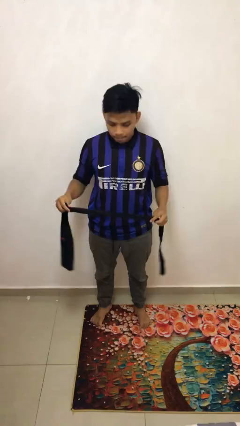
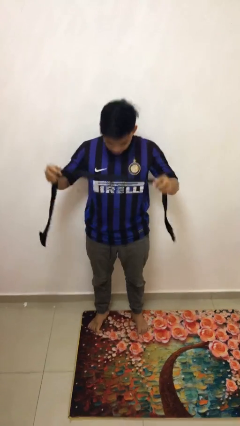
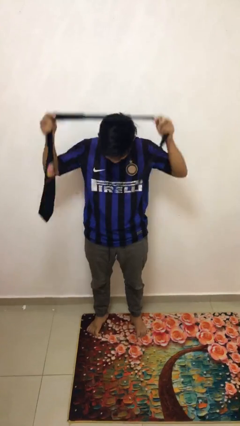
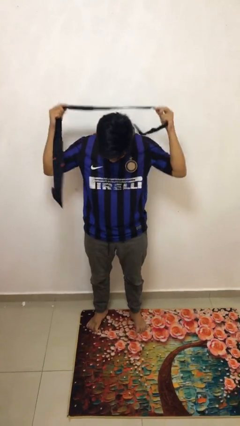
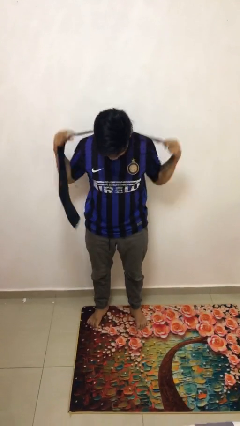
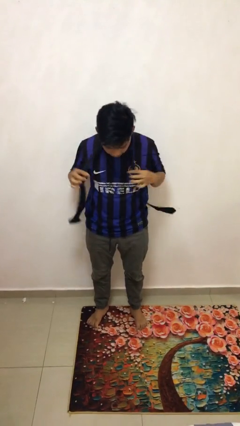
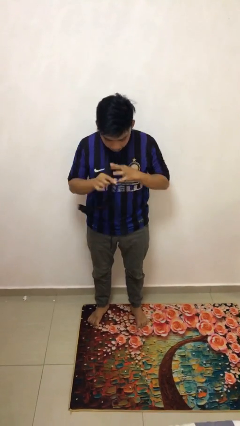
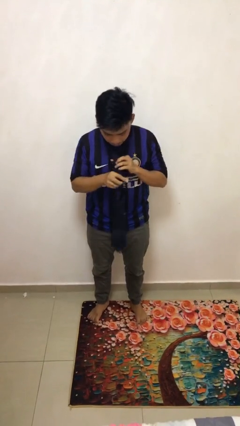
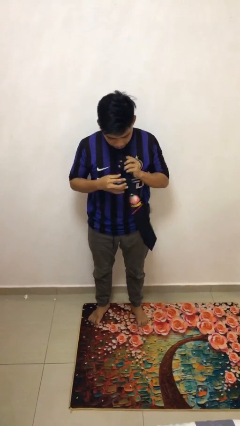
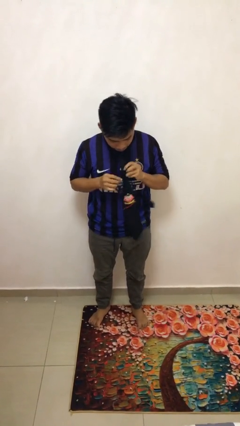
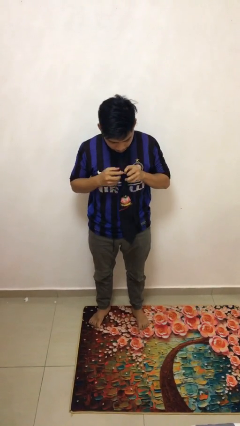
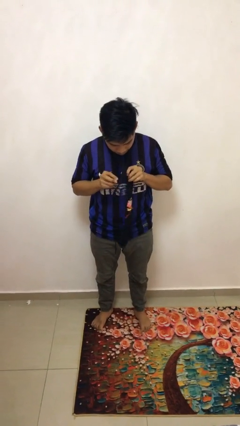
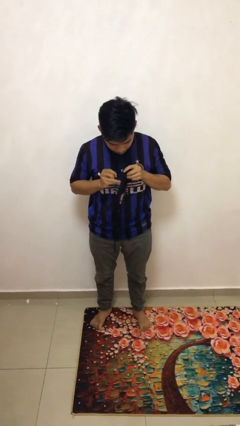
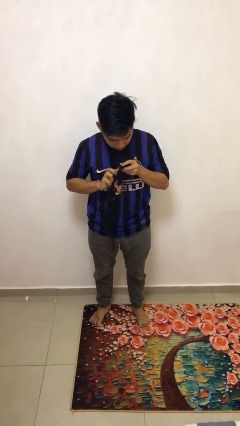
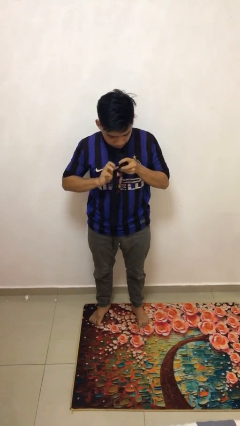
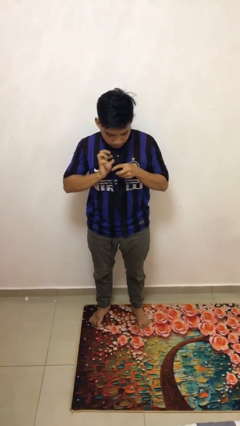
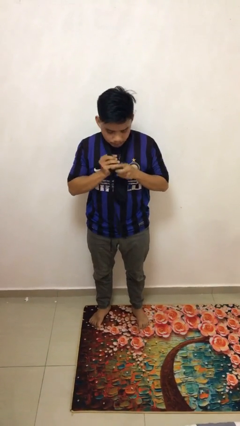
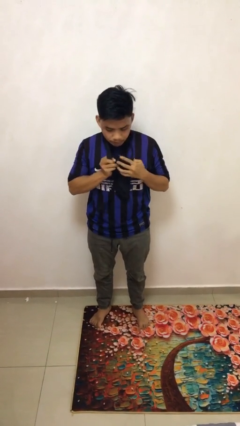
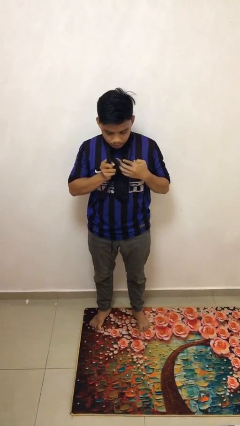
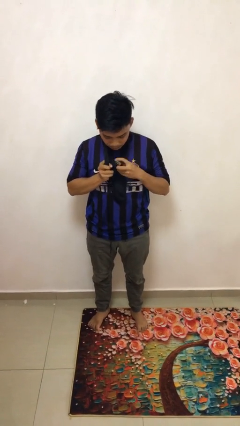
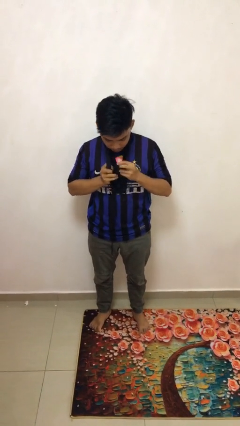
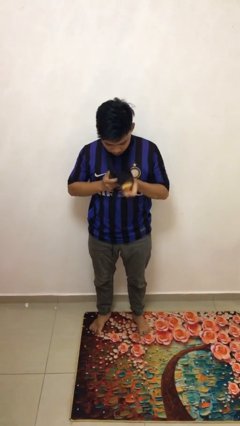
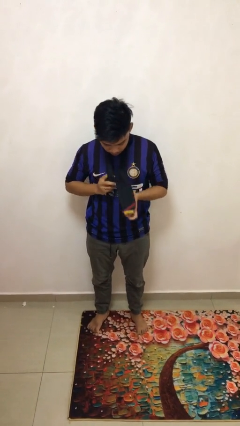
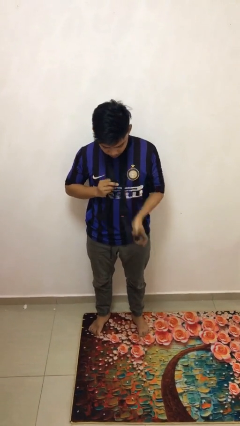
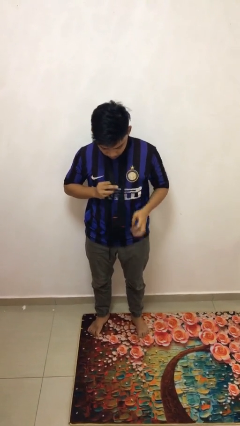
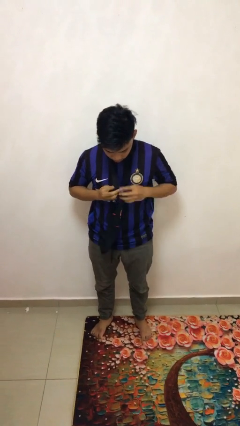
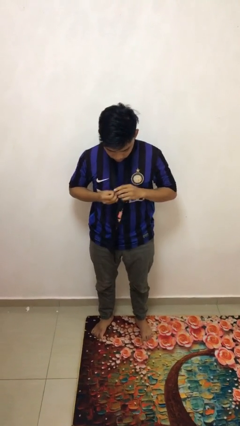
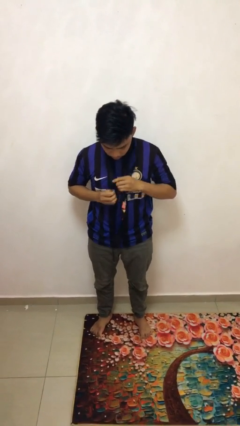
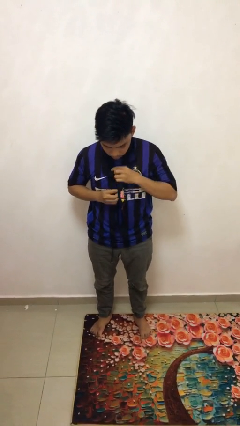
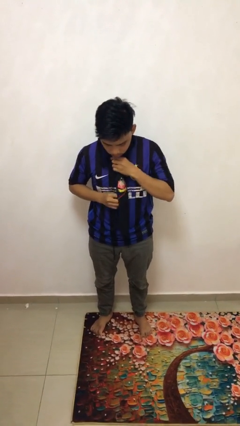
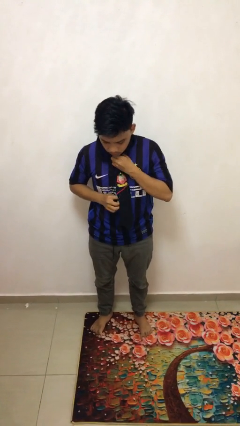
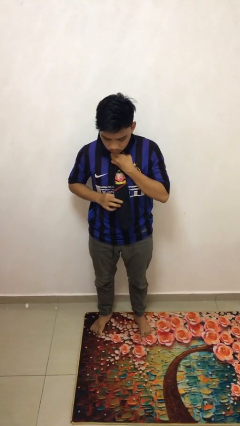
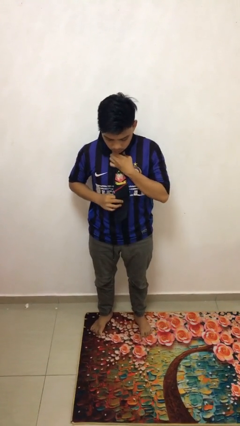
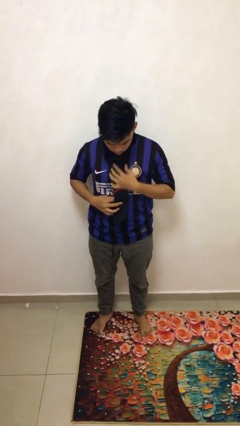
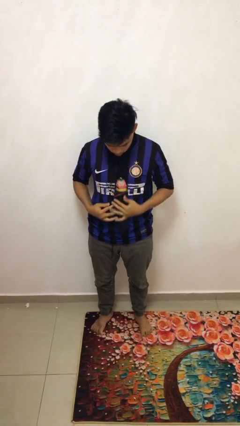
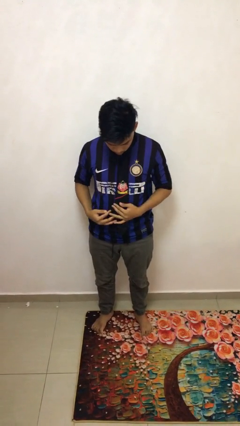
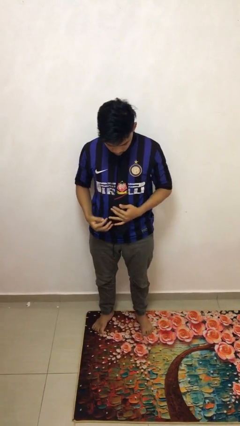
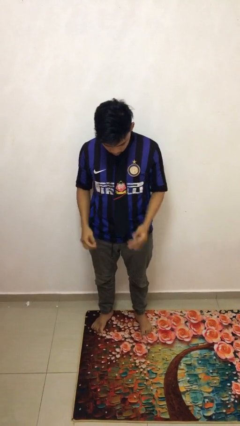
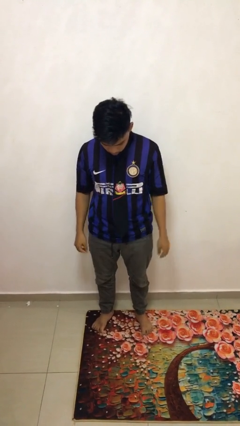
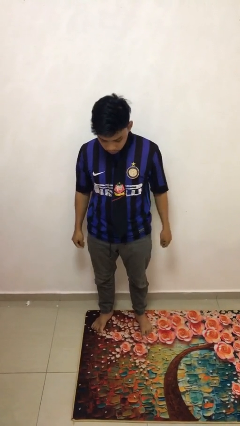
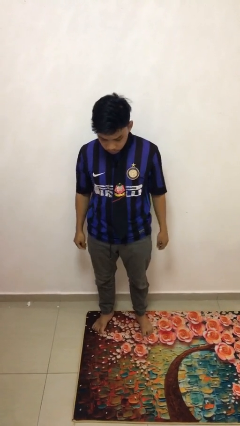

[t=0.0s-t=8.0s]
person puts on necktie

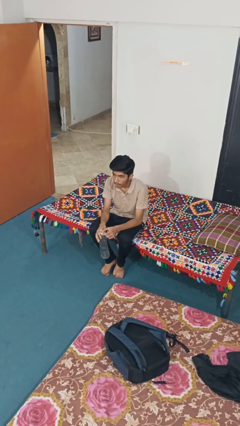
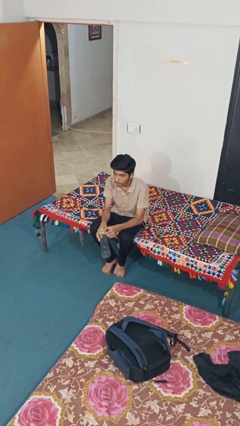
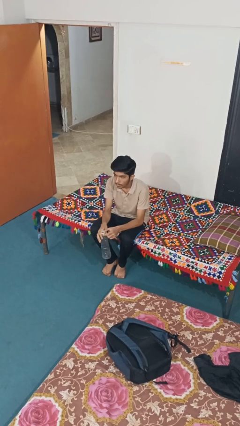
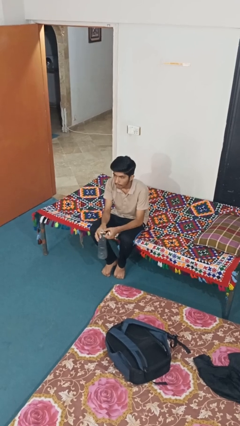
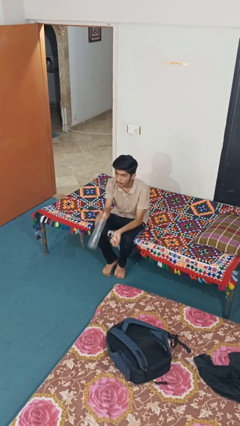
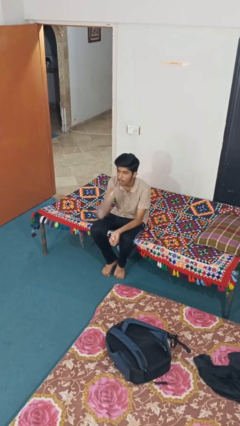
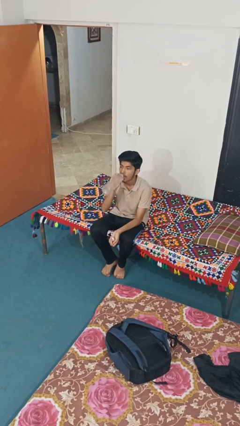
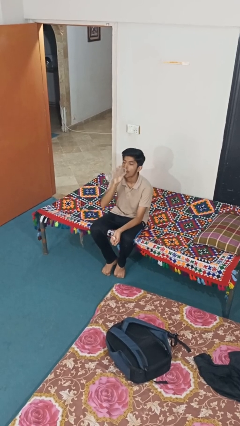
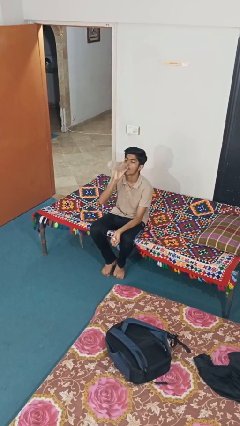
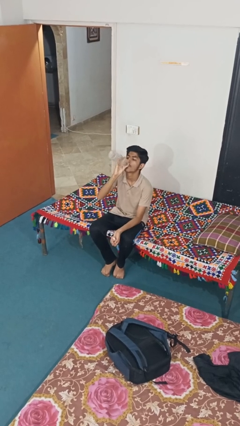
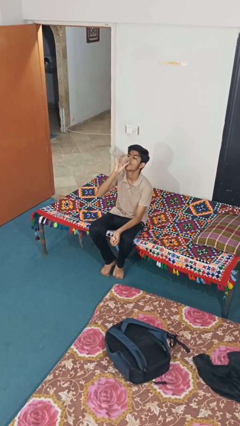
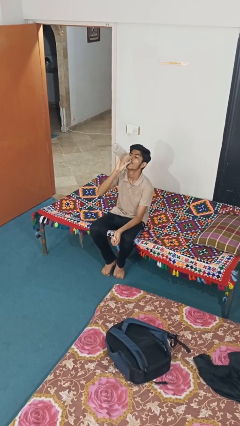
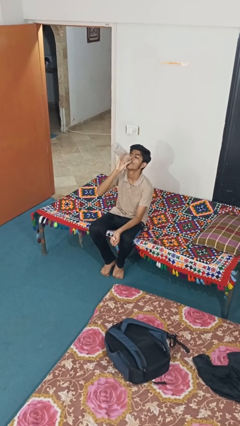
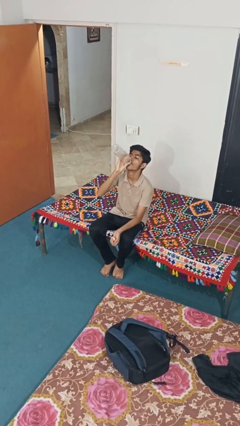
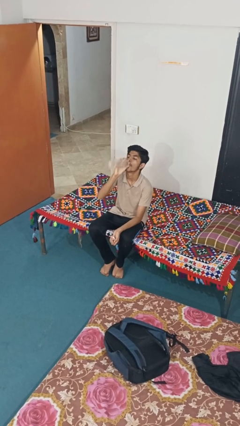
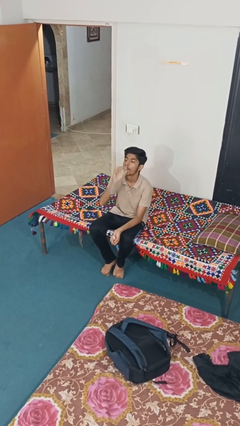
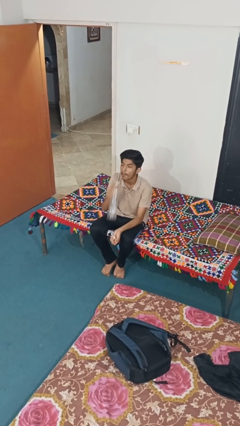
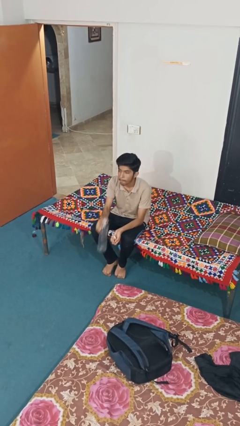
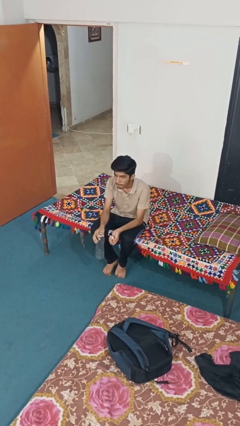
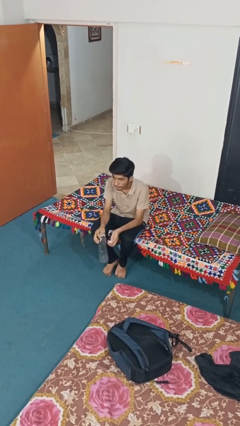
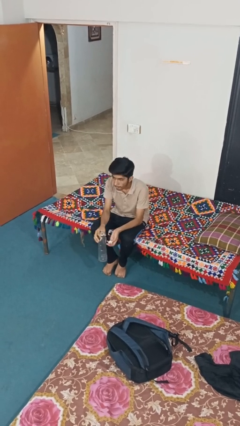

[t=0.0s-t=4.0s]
person drinks from bottle

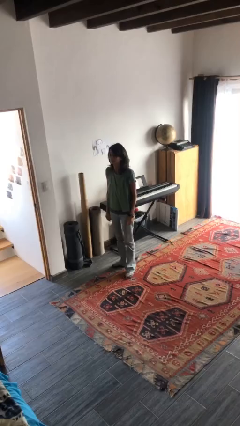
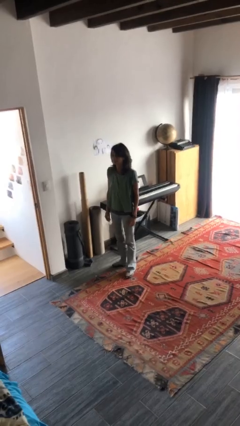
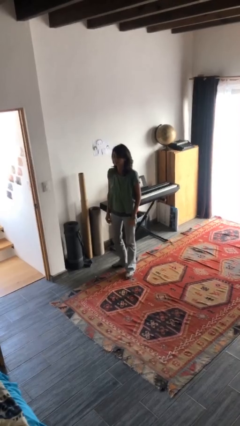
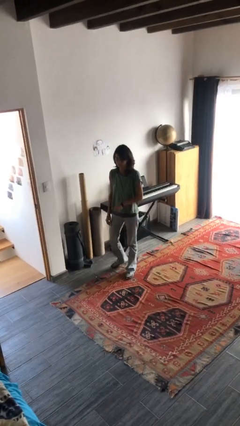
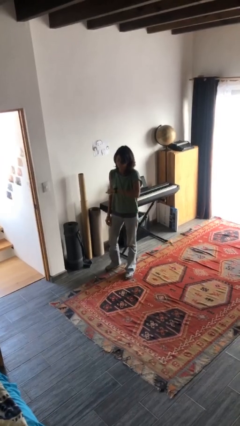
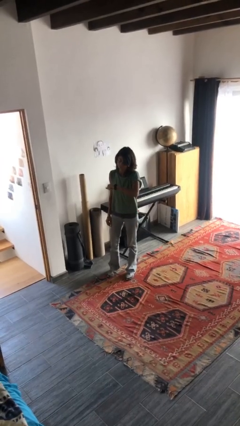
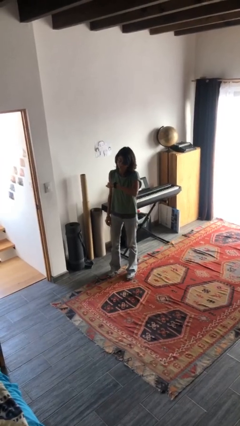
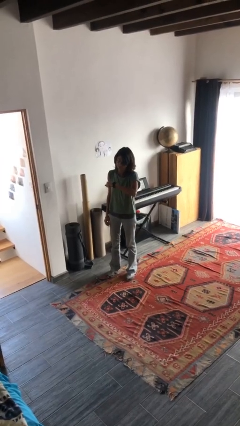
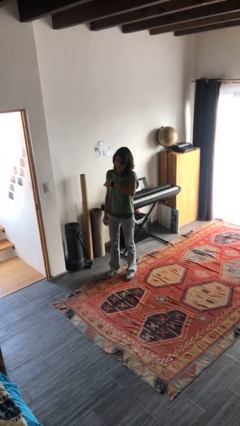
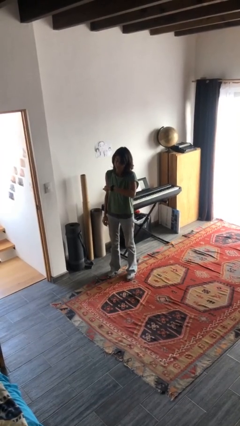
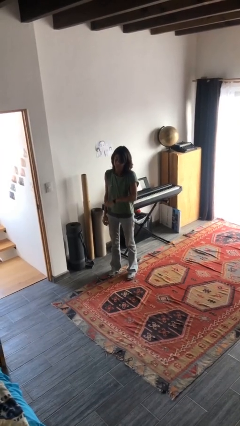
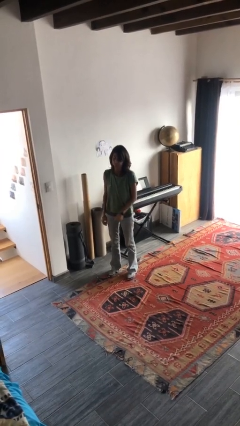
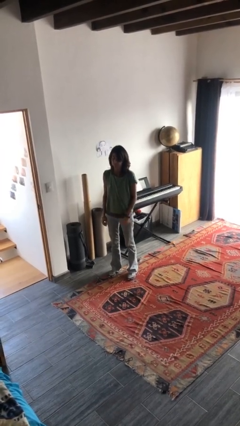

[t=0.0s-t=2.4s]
person looks at wristwatch

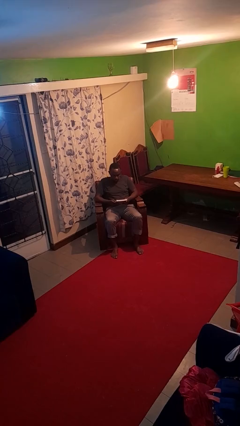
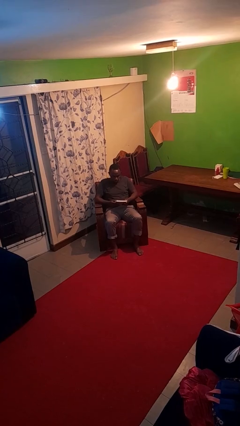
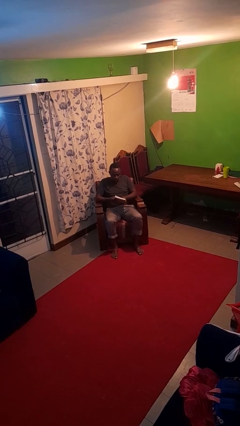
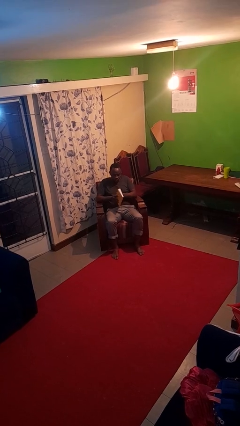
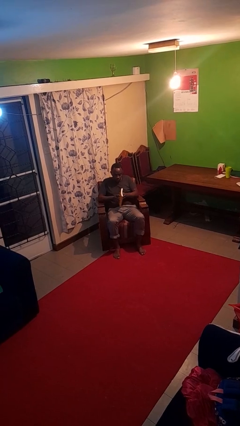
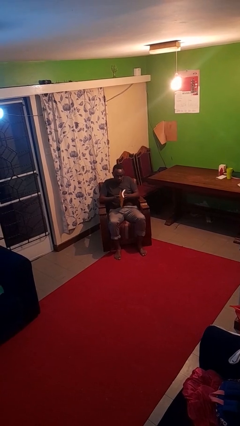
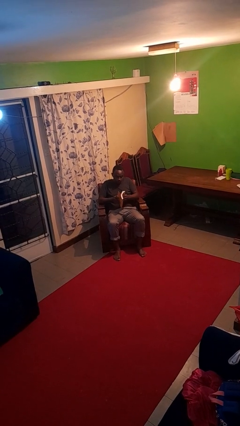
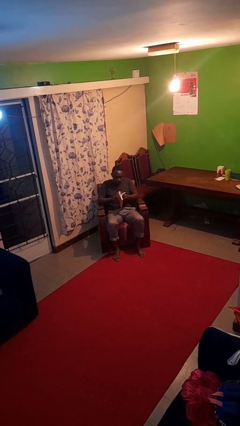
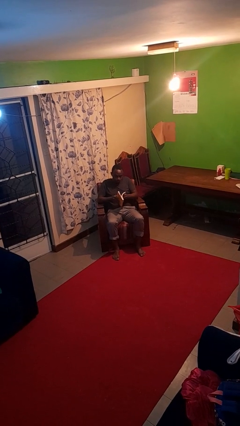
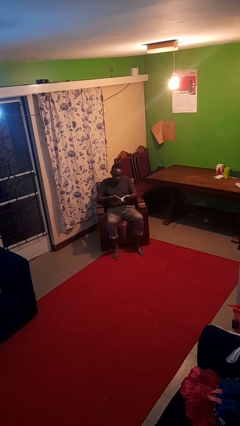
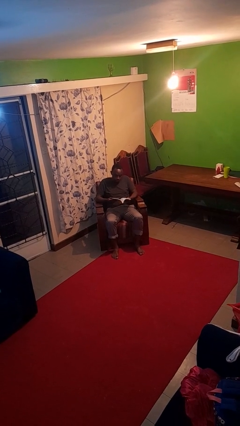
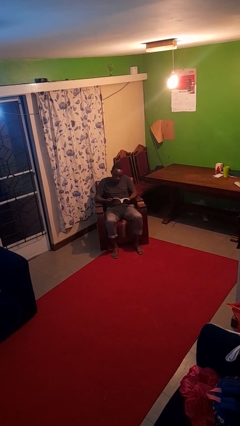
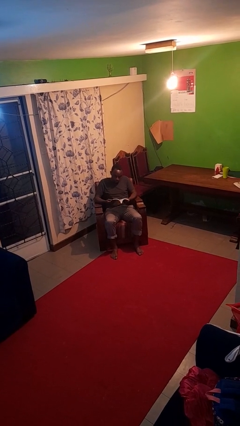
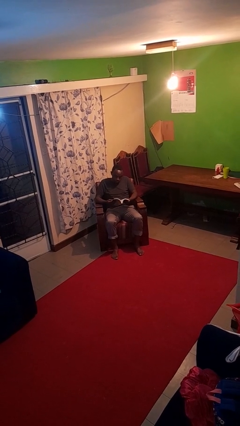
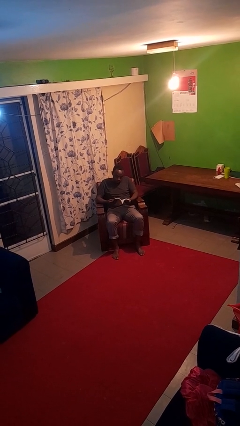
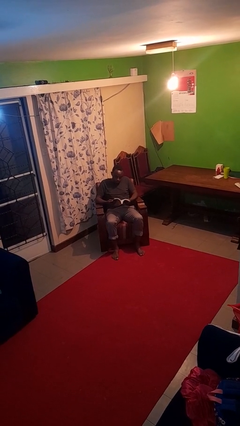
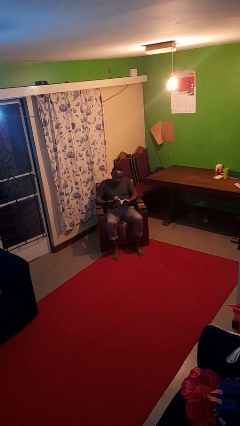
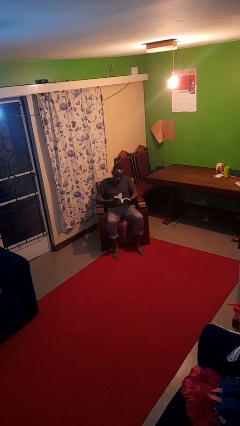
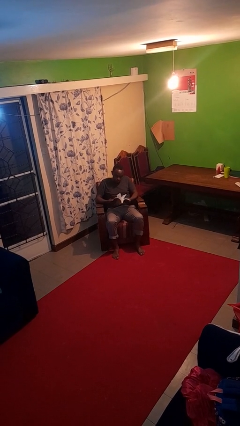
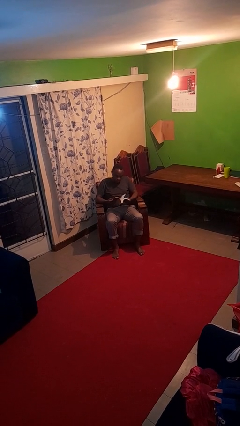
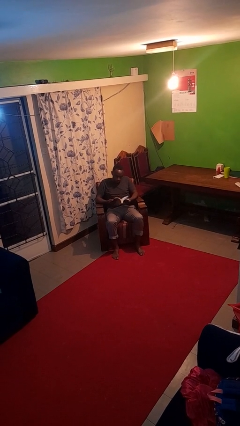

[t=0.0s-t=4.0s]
person reads book
